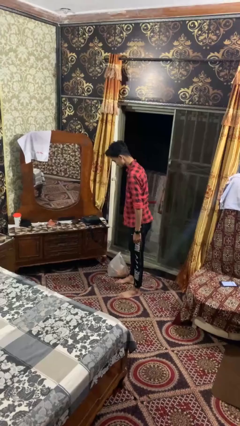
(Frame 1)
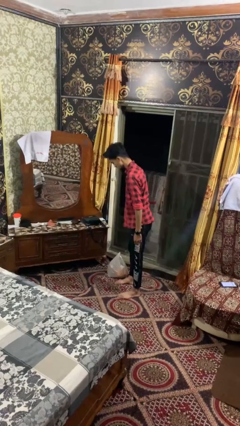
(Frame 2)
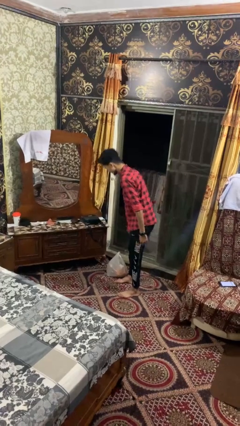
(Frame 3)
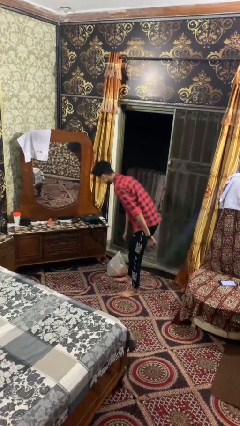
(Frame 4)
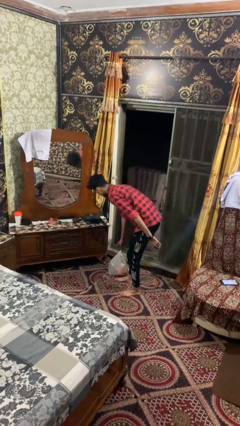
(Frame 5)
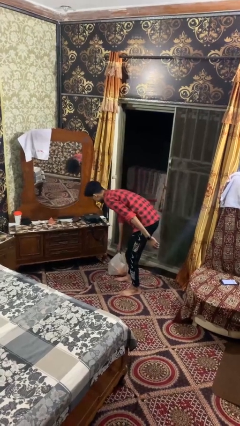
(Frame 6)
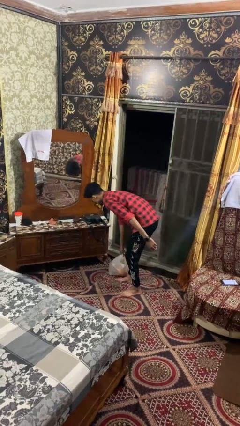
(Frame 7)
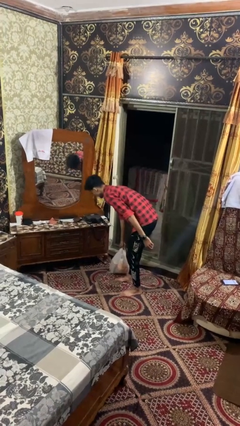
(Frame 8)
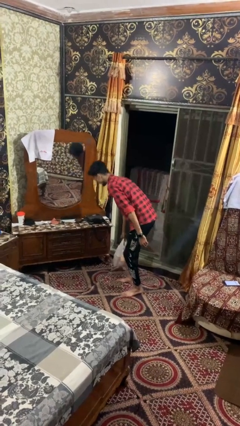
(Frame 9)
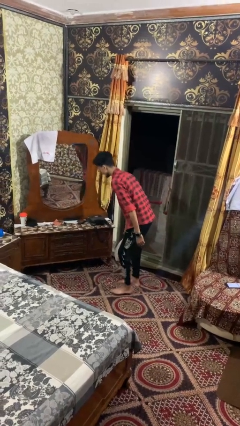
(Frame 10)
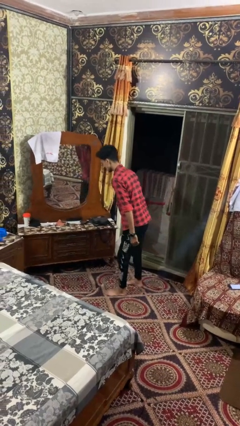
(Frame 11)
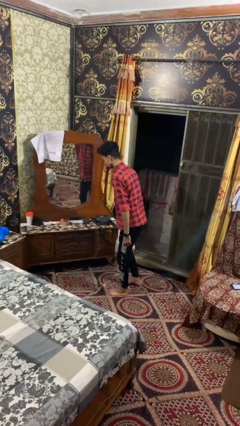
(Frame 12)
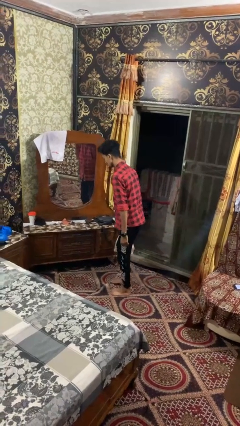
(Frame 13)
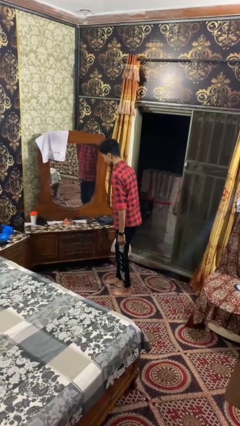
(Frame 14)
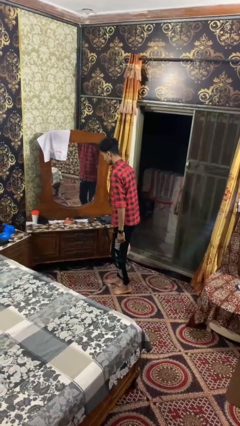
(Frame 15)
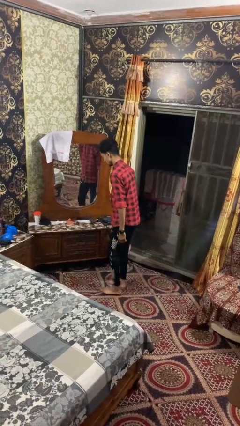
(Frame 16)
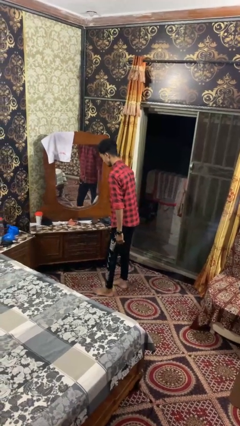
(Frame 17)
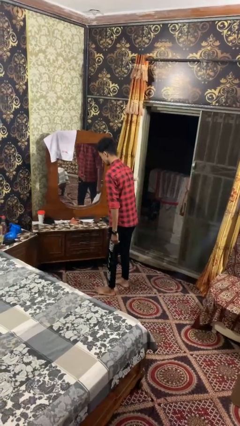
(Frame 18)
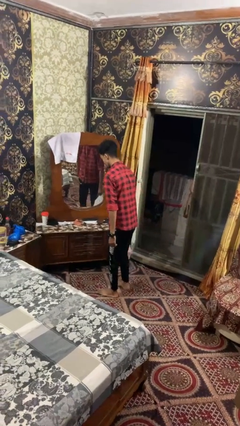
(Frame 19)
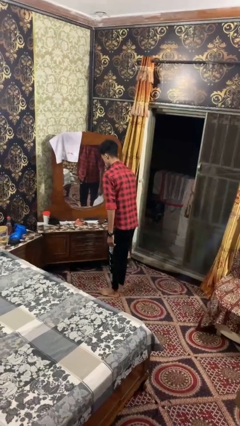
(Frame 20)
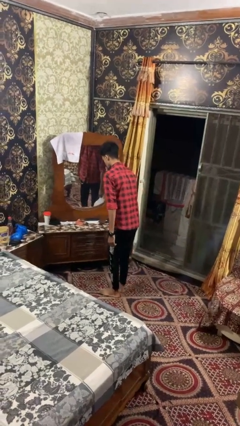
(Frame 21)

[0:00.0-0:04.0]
person carries groceries

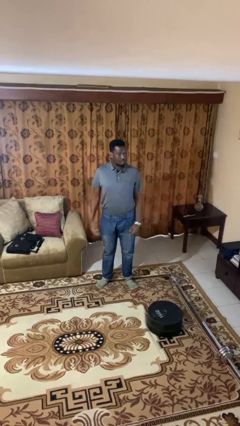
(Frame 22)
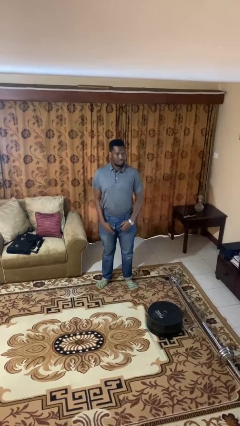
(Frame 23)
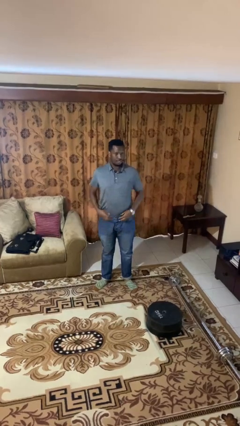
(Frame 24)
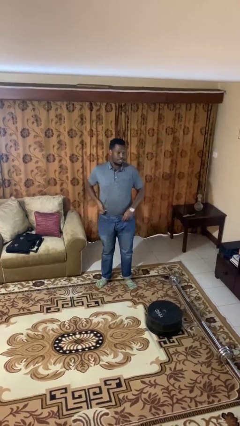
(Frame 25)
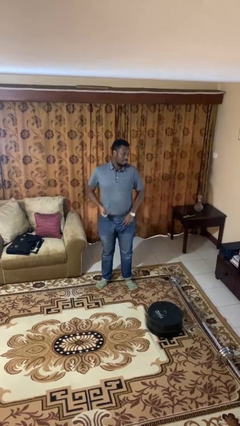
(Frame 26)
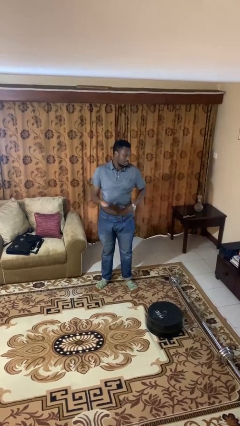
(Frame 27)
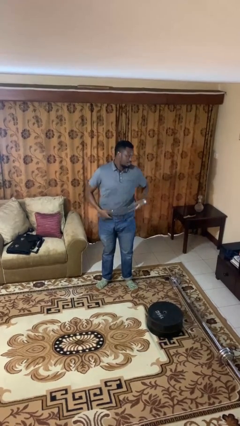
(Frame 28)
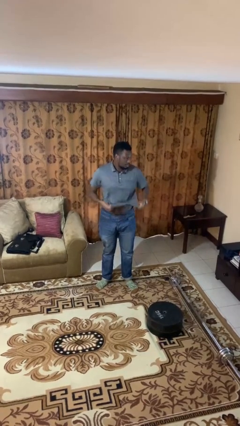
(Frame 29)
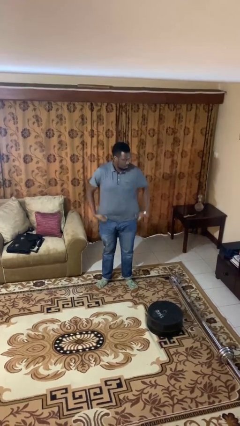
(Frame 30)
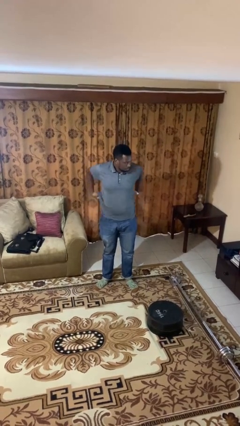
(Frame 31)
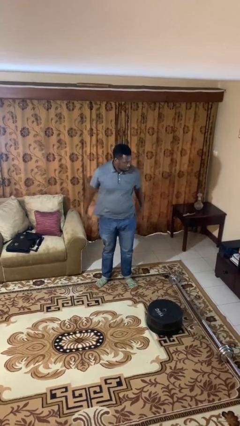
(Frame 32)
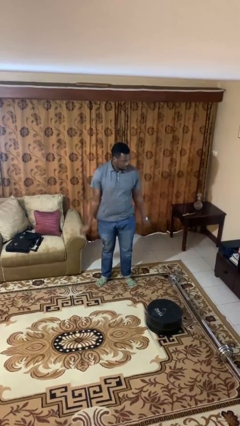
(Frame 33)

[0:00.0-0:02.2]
person untucks shirt

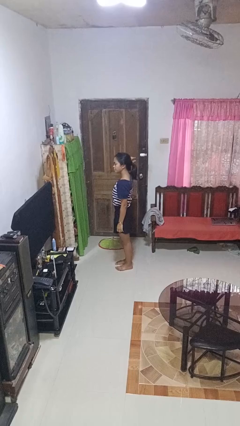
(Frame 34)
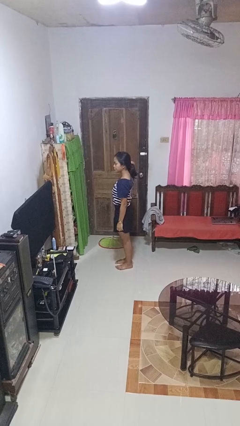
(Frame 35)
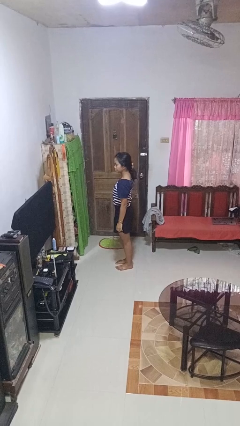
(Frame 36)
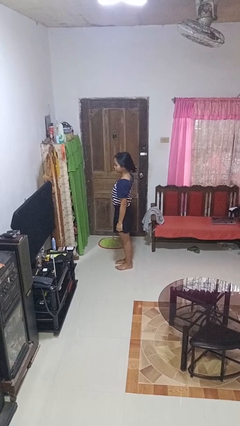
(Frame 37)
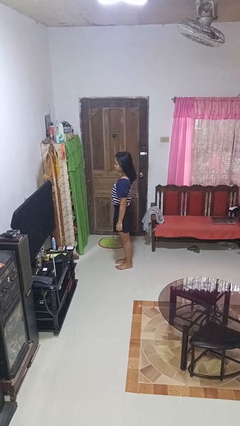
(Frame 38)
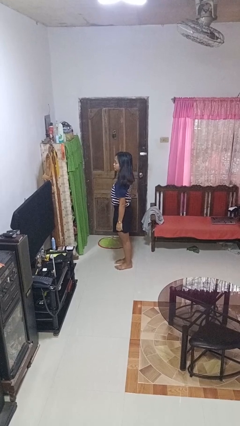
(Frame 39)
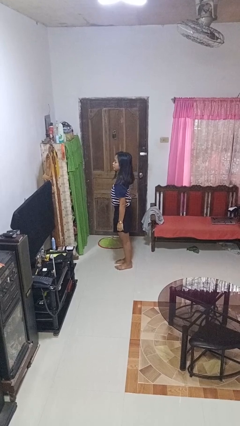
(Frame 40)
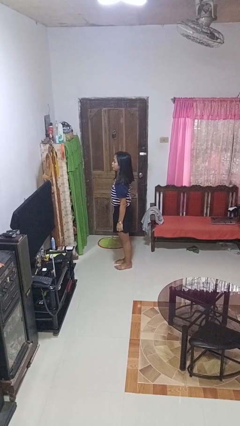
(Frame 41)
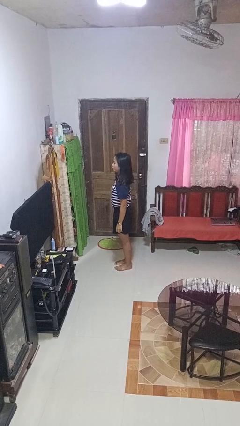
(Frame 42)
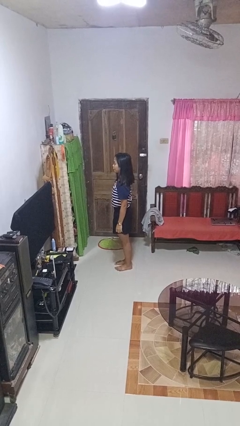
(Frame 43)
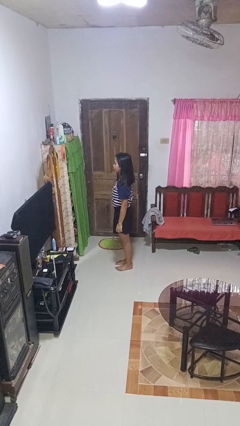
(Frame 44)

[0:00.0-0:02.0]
person takes off hairtie

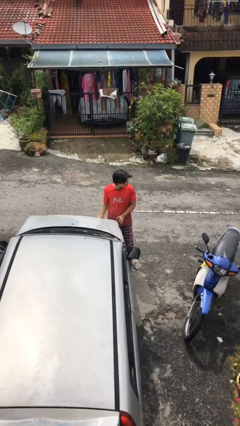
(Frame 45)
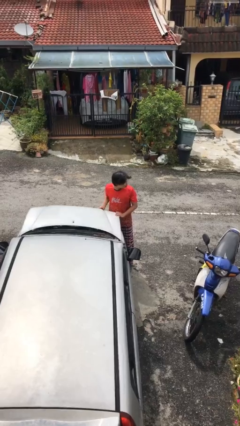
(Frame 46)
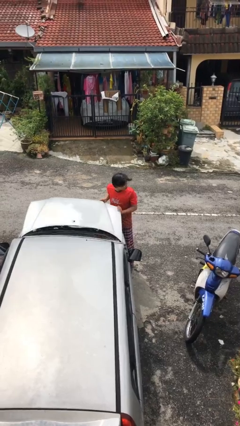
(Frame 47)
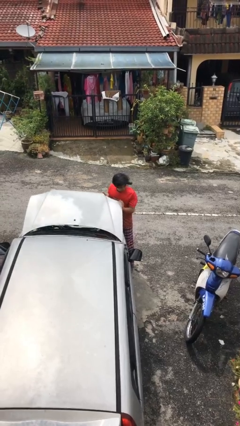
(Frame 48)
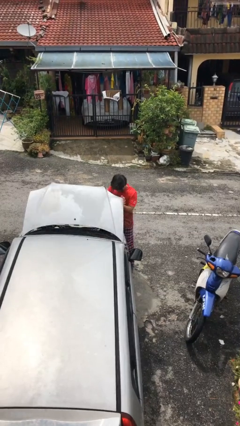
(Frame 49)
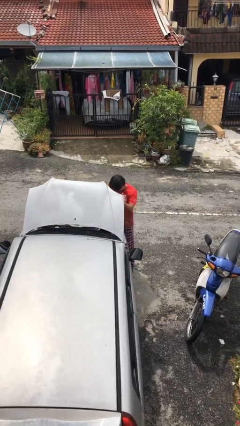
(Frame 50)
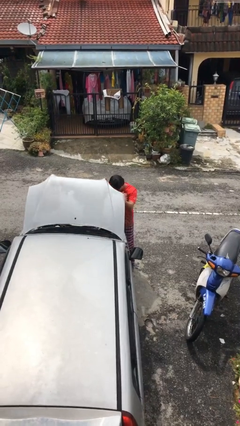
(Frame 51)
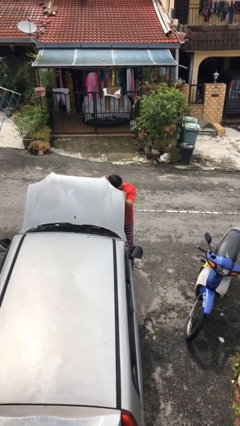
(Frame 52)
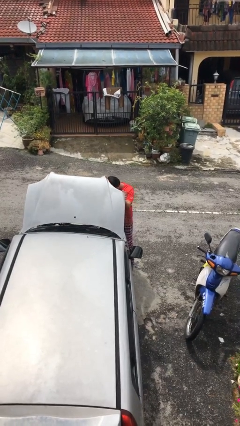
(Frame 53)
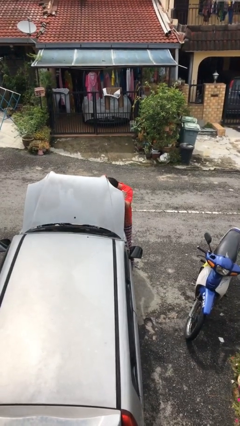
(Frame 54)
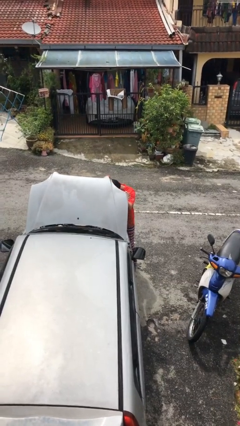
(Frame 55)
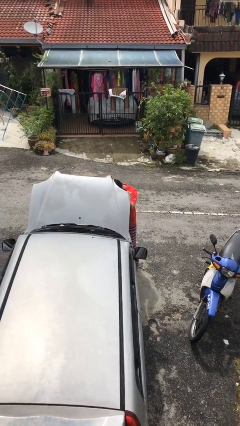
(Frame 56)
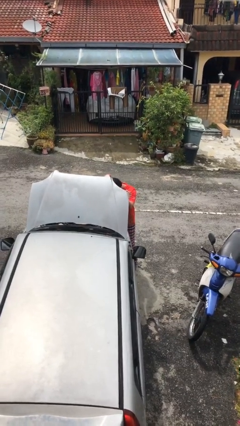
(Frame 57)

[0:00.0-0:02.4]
person opens car hood

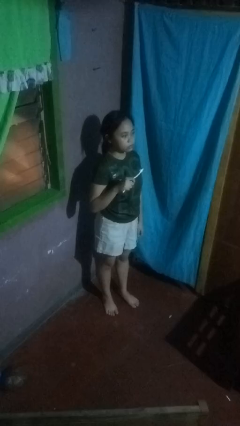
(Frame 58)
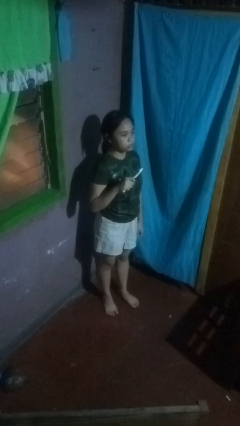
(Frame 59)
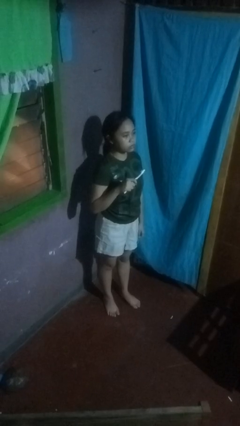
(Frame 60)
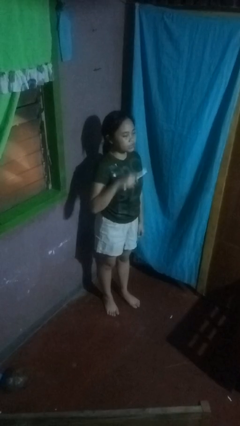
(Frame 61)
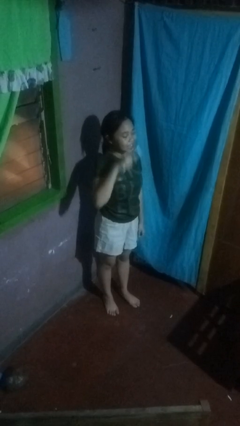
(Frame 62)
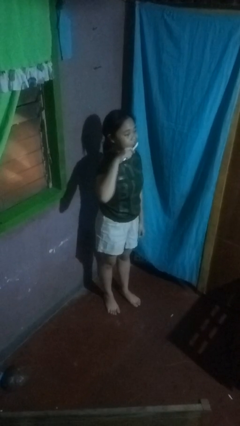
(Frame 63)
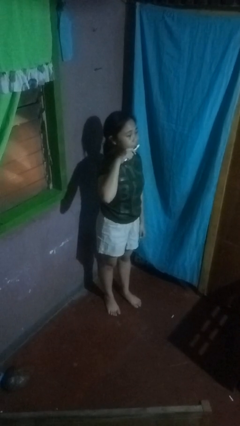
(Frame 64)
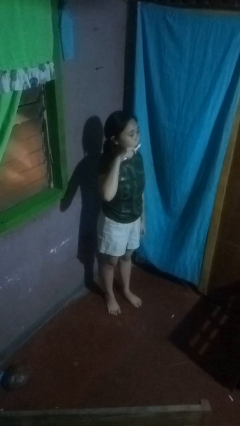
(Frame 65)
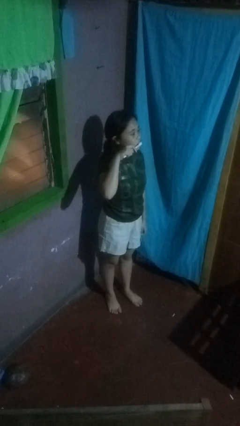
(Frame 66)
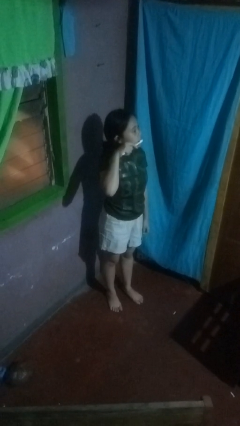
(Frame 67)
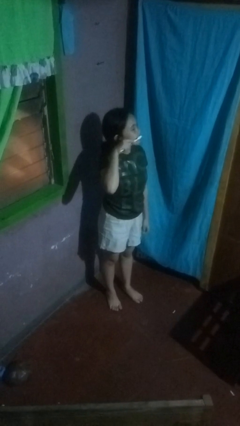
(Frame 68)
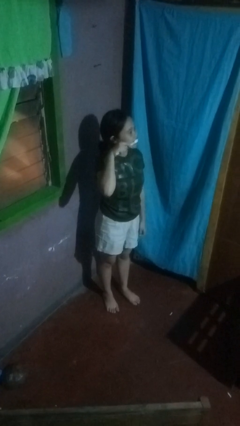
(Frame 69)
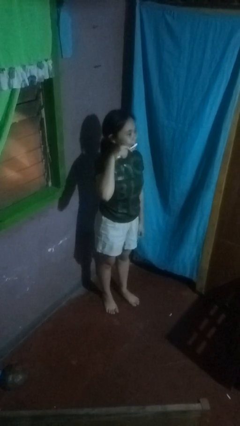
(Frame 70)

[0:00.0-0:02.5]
person brushes teeth

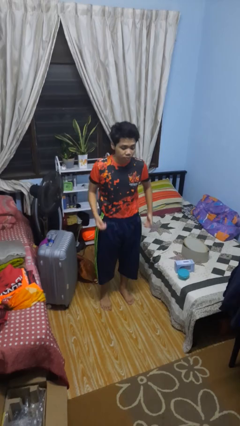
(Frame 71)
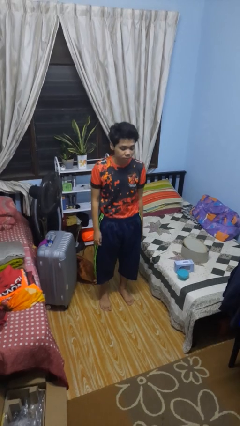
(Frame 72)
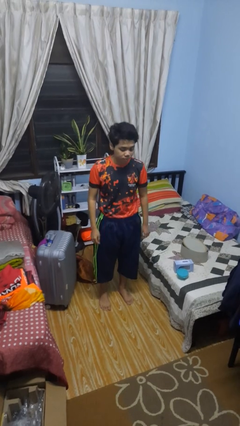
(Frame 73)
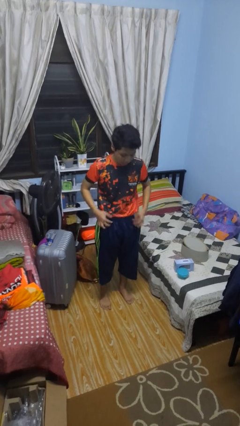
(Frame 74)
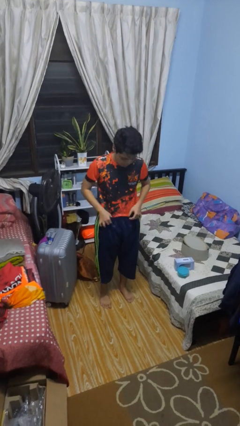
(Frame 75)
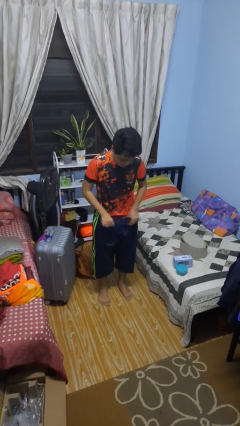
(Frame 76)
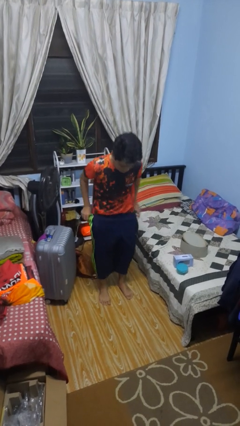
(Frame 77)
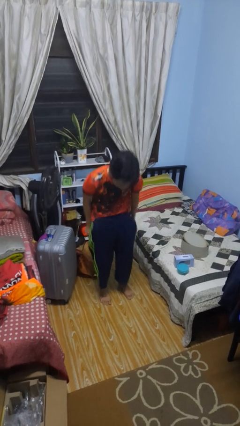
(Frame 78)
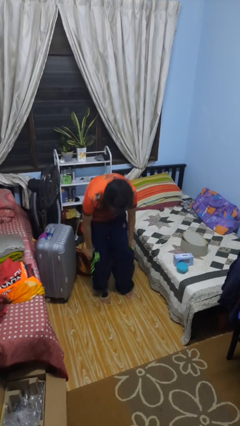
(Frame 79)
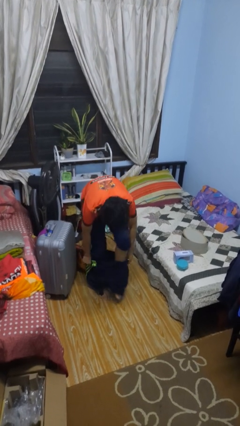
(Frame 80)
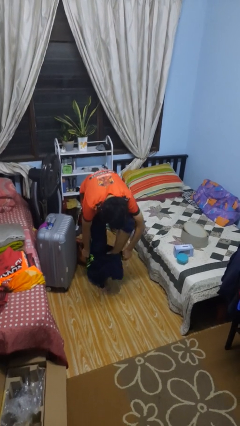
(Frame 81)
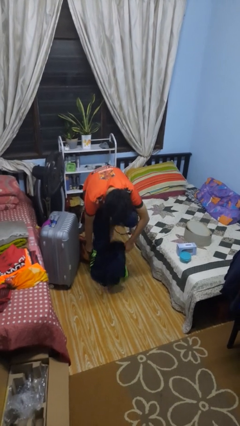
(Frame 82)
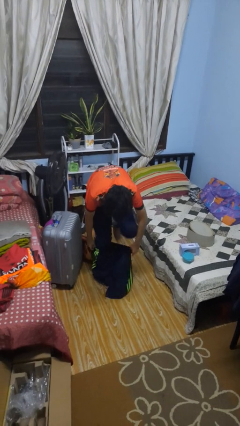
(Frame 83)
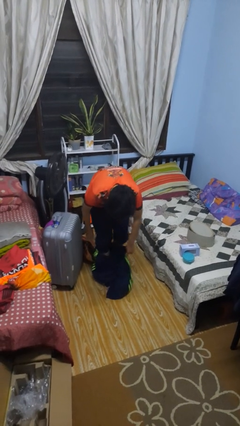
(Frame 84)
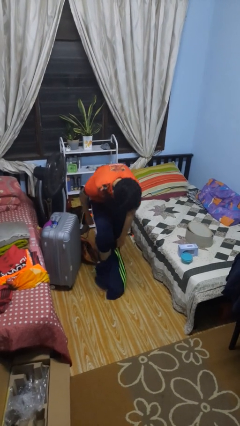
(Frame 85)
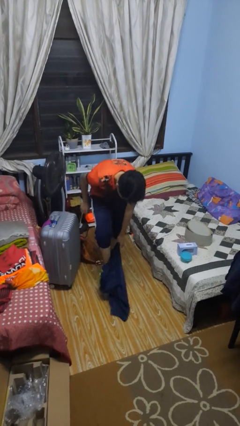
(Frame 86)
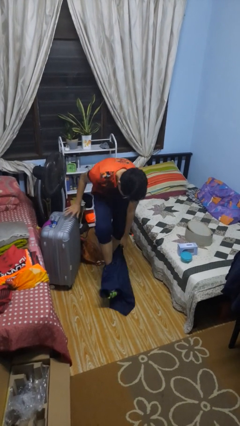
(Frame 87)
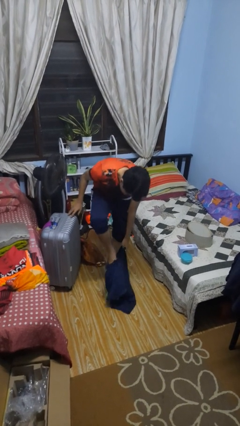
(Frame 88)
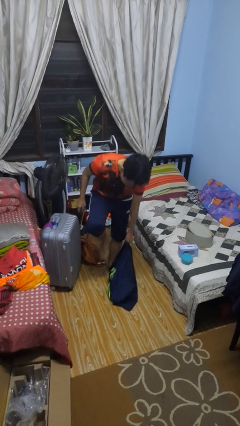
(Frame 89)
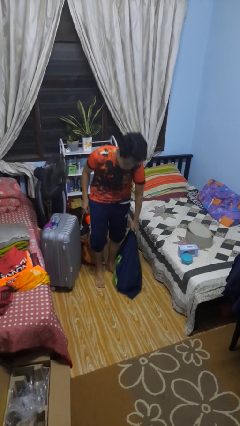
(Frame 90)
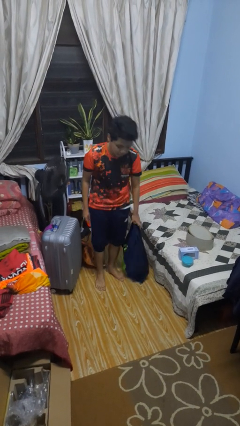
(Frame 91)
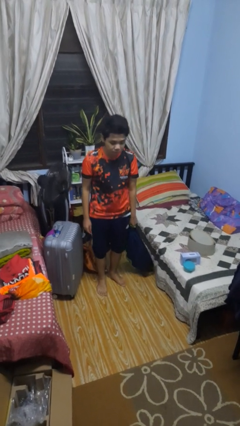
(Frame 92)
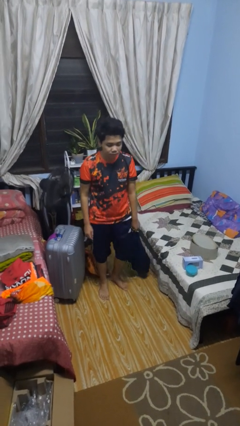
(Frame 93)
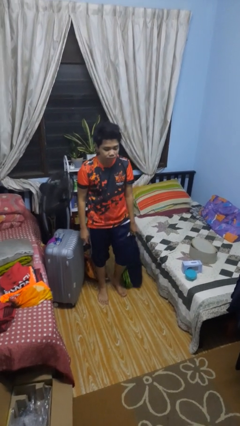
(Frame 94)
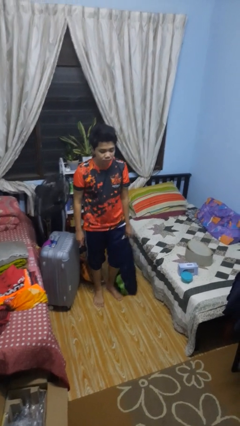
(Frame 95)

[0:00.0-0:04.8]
person takes off pants
